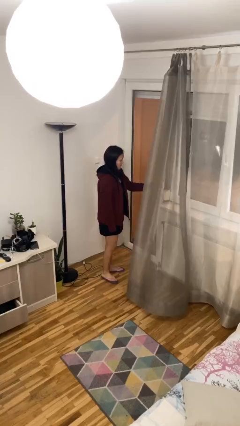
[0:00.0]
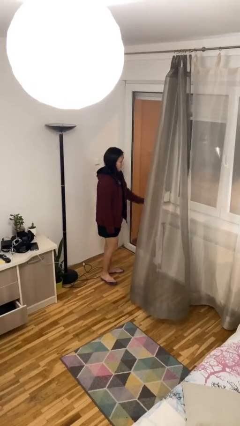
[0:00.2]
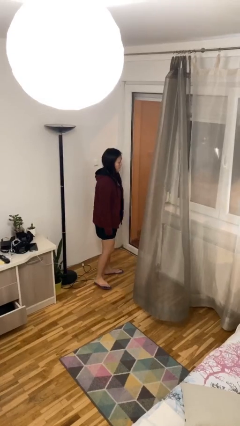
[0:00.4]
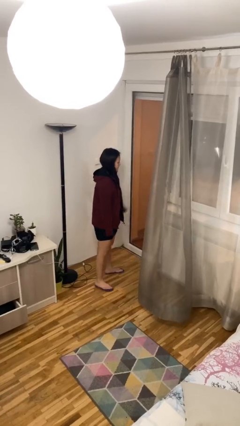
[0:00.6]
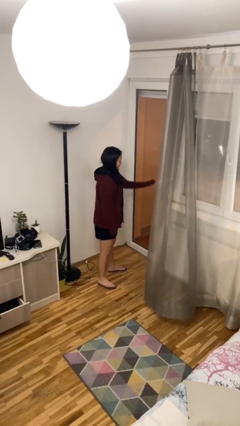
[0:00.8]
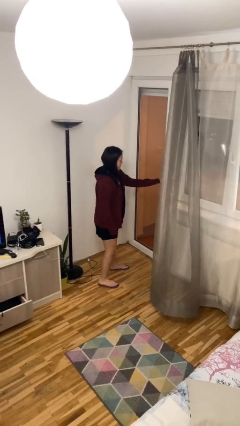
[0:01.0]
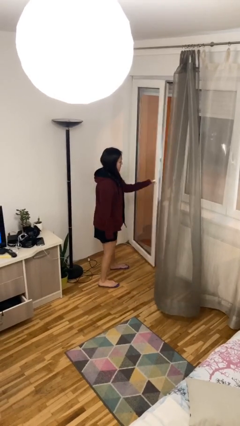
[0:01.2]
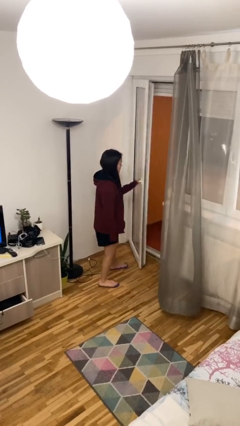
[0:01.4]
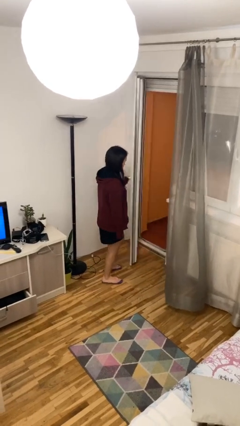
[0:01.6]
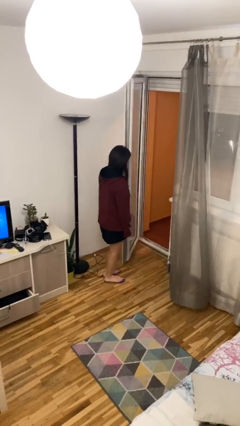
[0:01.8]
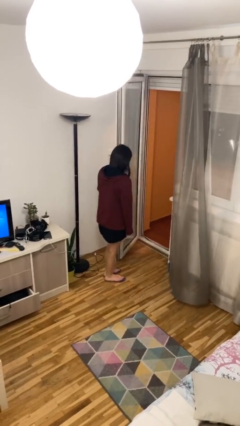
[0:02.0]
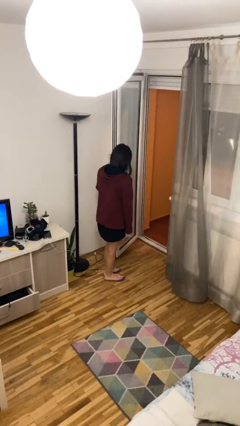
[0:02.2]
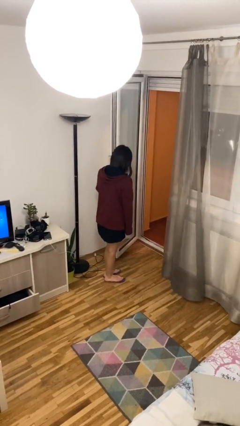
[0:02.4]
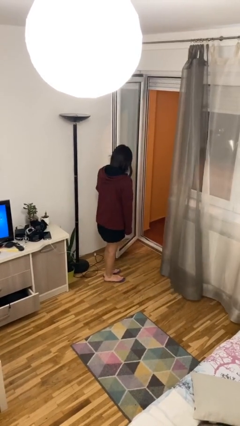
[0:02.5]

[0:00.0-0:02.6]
person opens facility door

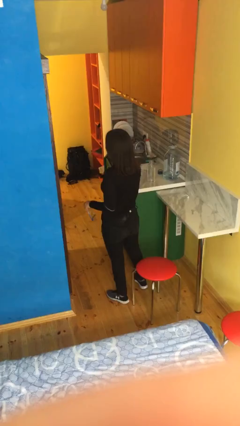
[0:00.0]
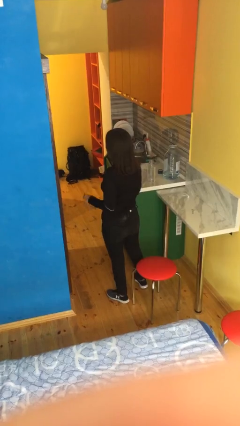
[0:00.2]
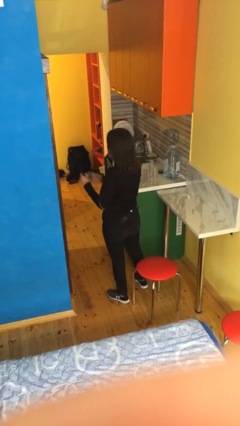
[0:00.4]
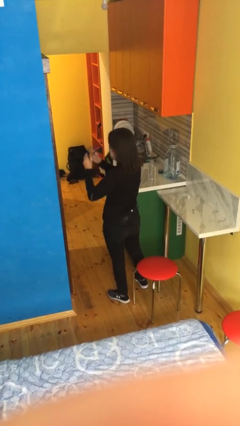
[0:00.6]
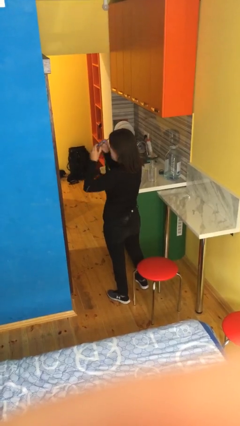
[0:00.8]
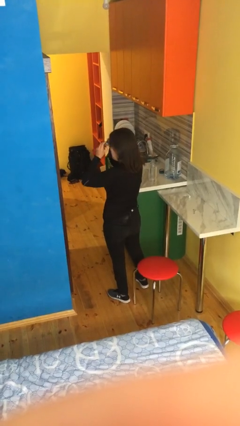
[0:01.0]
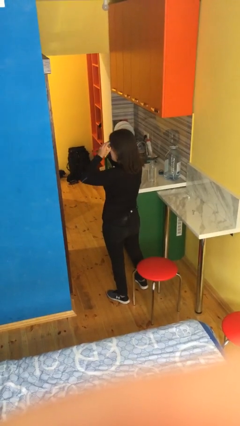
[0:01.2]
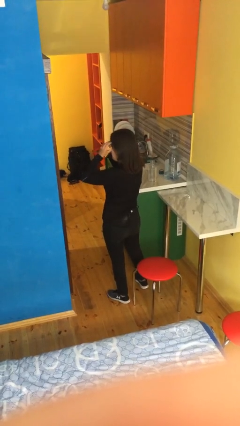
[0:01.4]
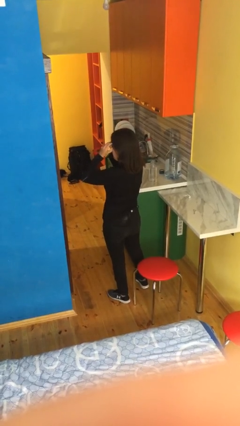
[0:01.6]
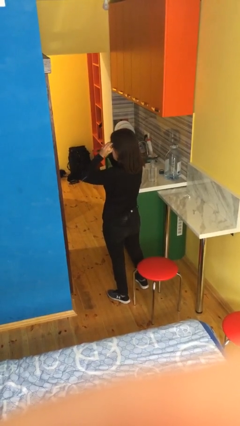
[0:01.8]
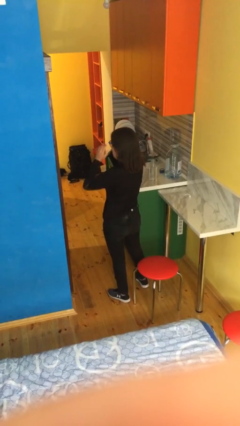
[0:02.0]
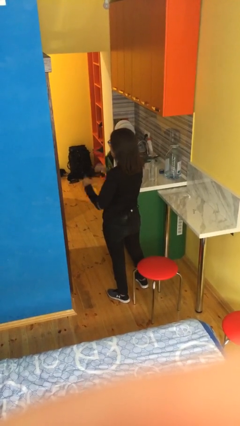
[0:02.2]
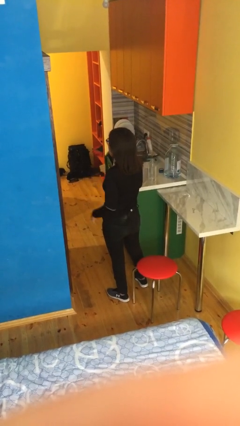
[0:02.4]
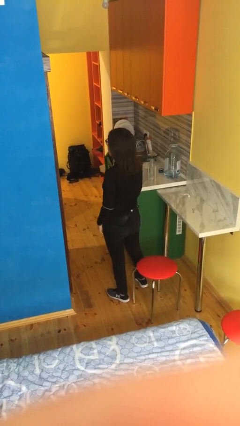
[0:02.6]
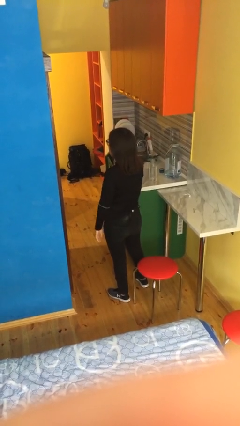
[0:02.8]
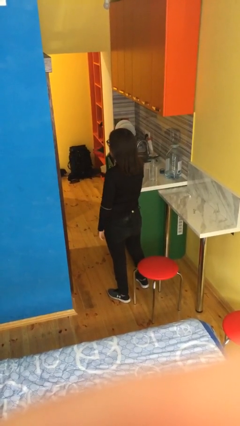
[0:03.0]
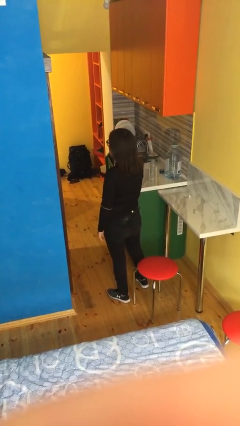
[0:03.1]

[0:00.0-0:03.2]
person puts on glasses

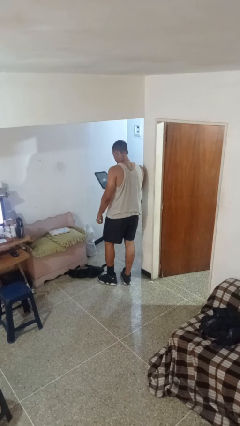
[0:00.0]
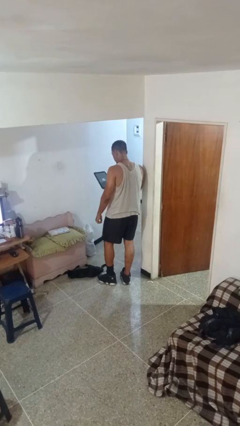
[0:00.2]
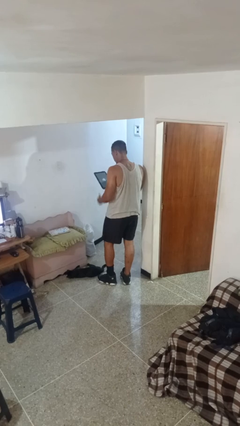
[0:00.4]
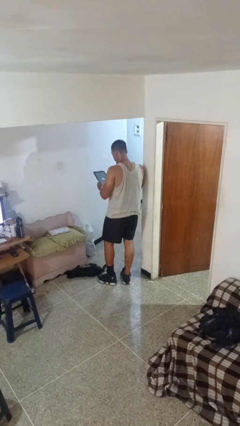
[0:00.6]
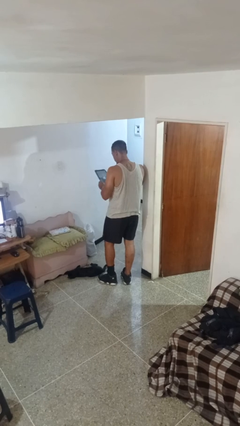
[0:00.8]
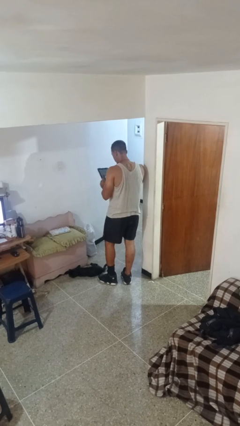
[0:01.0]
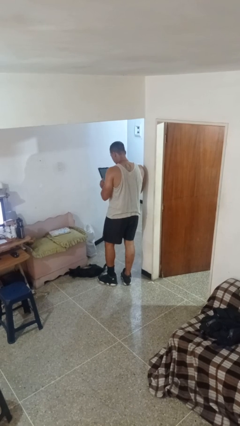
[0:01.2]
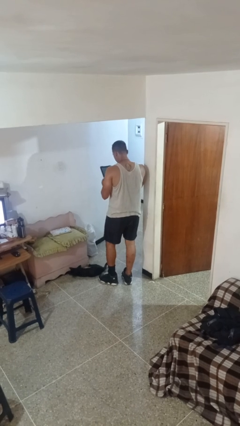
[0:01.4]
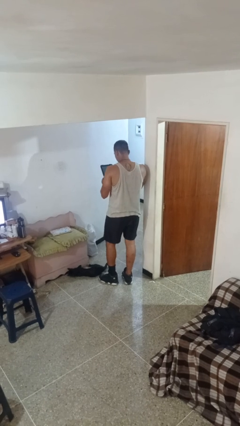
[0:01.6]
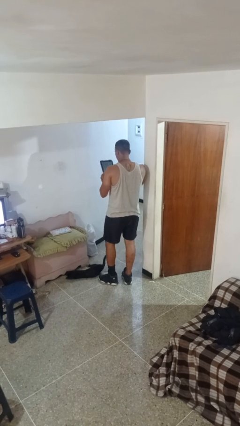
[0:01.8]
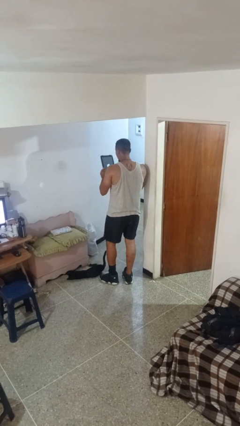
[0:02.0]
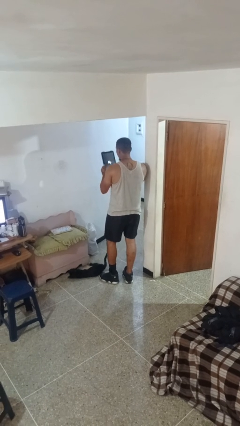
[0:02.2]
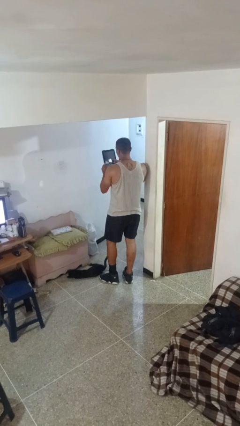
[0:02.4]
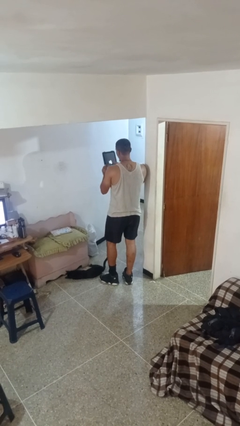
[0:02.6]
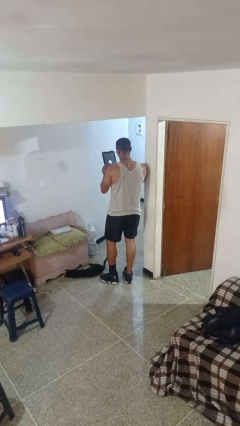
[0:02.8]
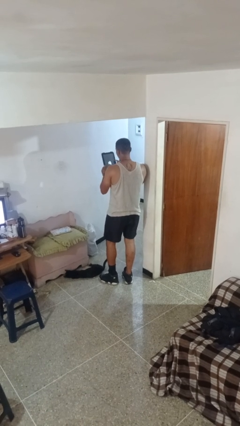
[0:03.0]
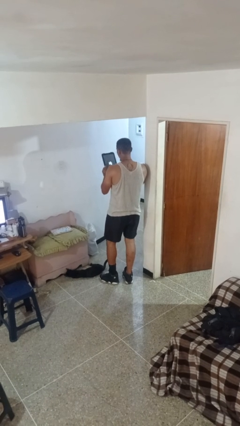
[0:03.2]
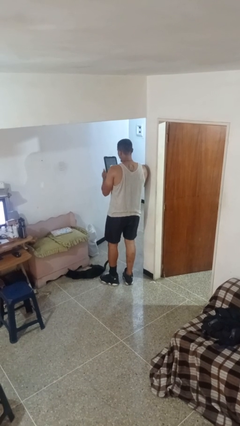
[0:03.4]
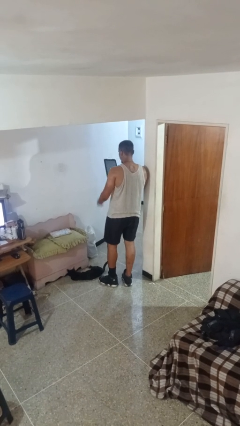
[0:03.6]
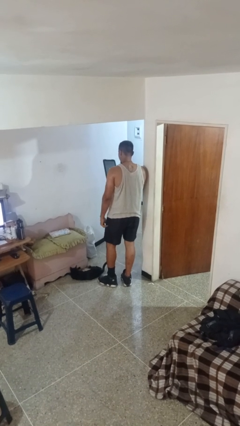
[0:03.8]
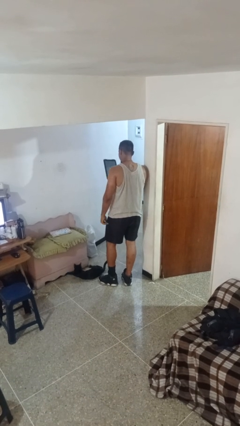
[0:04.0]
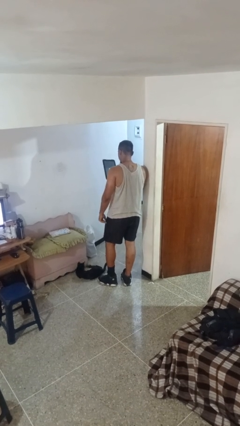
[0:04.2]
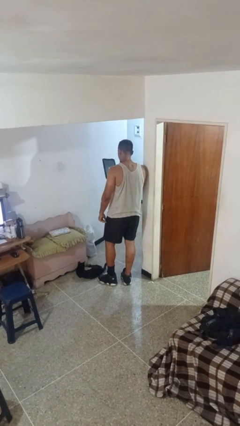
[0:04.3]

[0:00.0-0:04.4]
person interacts with tablet

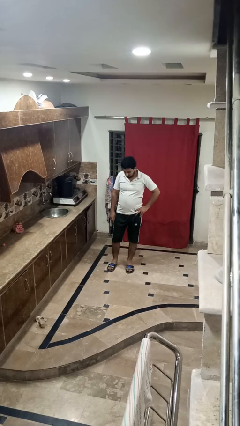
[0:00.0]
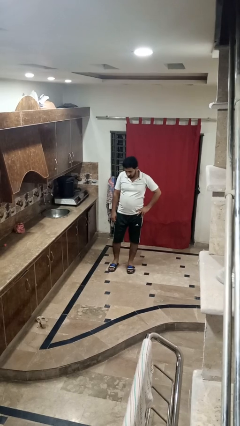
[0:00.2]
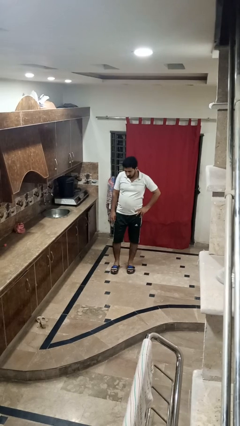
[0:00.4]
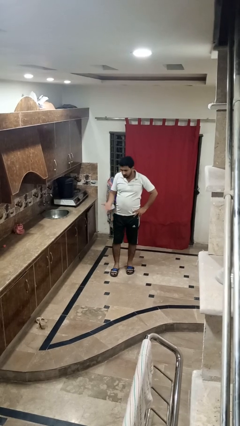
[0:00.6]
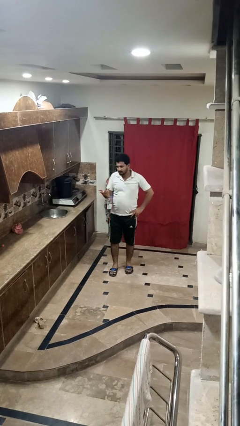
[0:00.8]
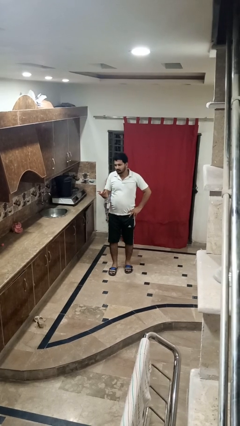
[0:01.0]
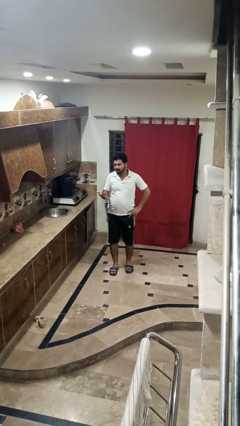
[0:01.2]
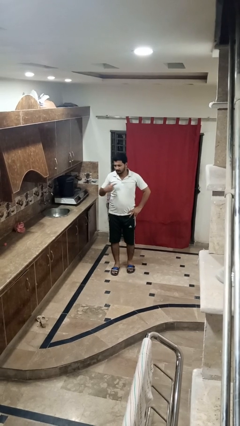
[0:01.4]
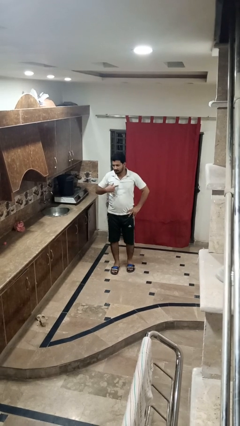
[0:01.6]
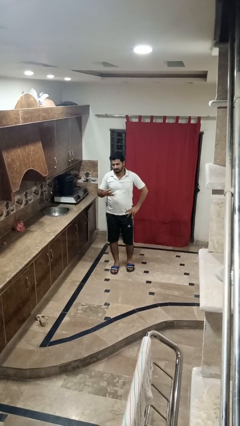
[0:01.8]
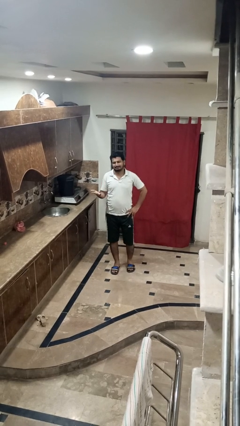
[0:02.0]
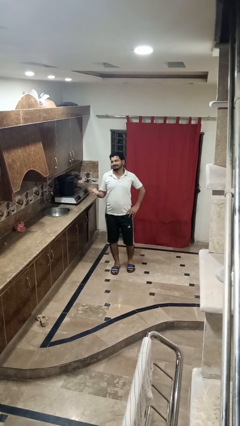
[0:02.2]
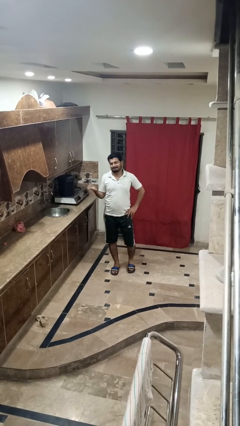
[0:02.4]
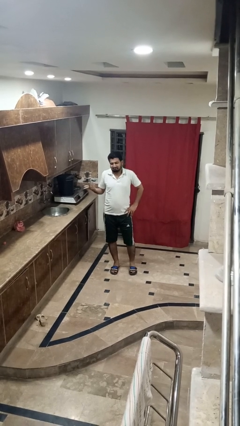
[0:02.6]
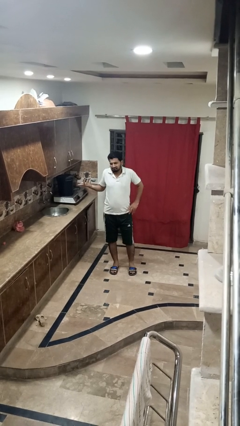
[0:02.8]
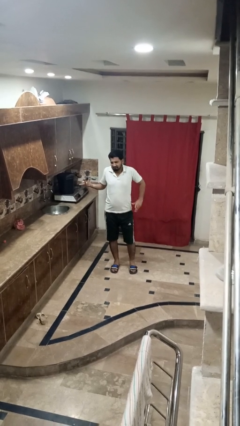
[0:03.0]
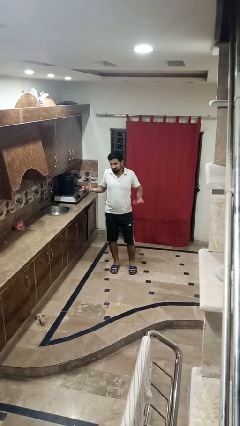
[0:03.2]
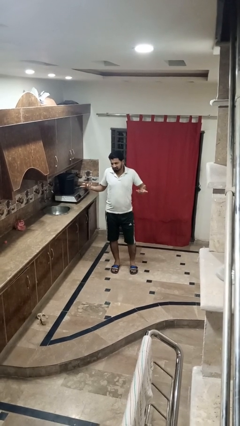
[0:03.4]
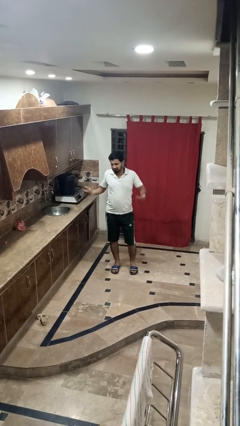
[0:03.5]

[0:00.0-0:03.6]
person shrugs

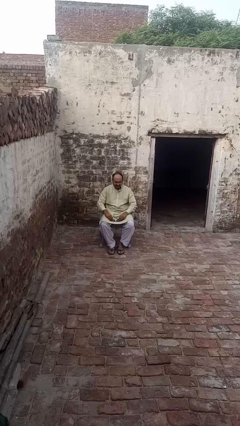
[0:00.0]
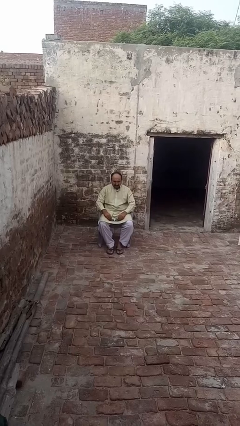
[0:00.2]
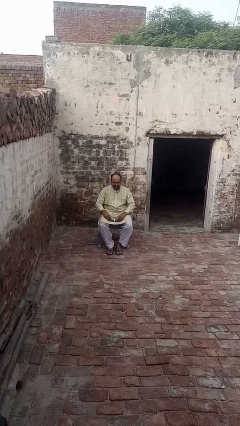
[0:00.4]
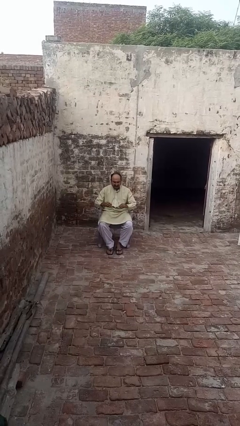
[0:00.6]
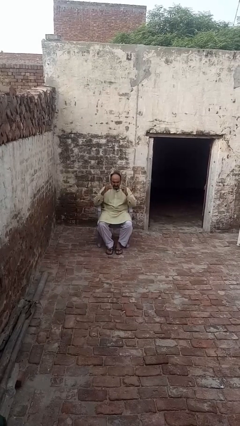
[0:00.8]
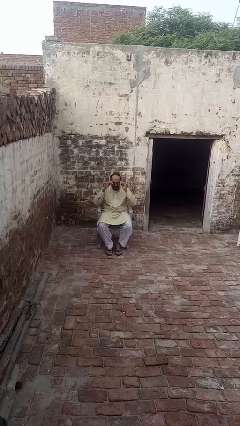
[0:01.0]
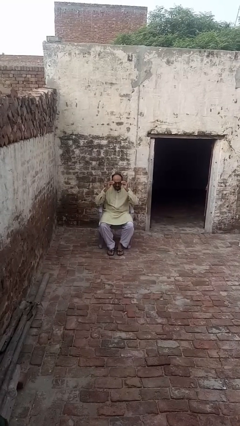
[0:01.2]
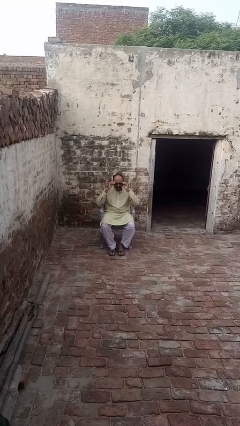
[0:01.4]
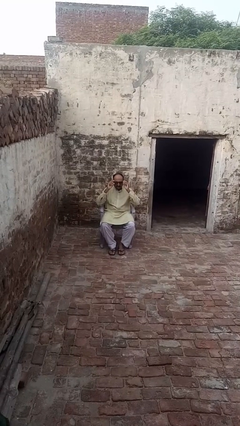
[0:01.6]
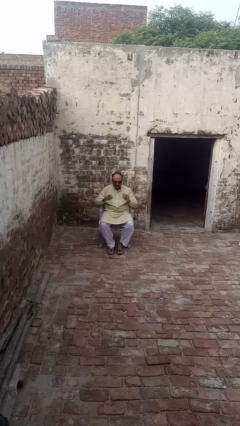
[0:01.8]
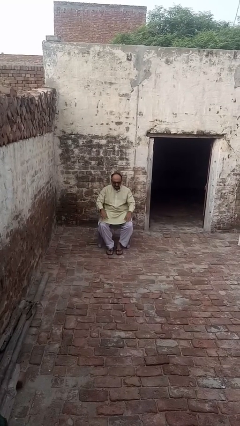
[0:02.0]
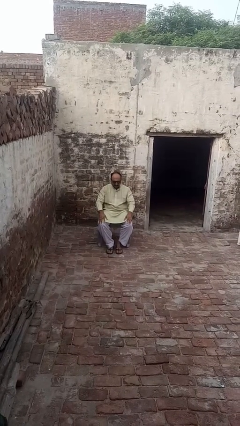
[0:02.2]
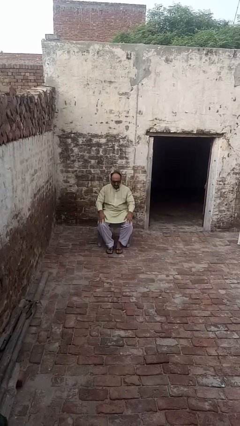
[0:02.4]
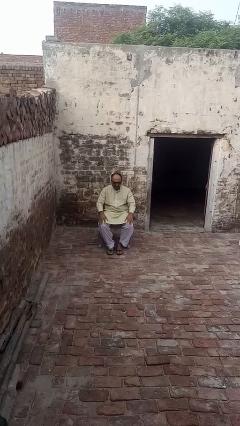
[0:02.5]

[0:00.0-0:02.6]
person puts on sunglasses

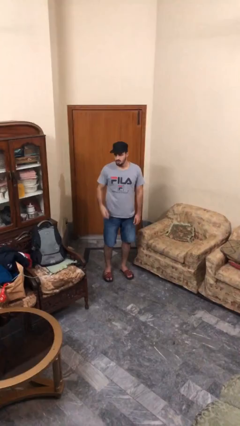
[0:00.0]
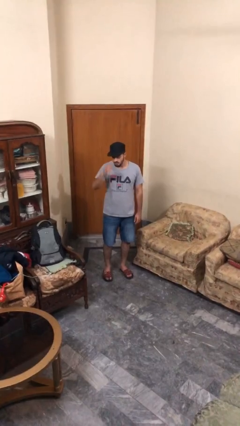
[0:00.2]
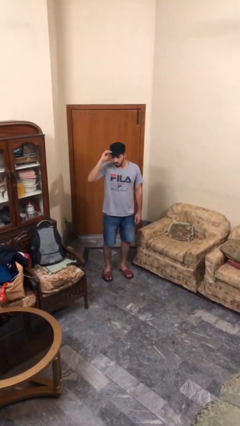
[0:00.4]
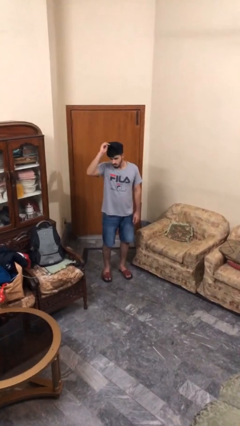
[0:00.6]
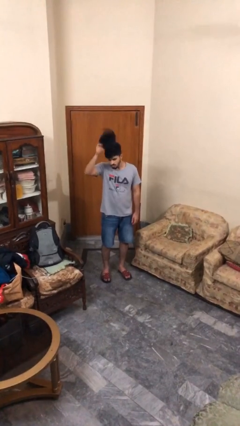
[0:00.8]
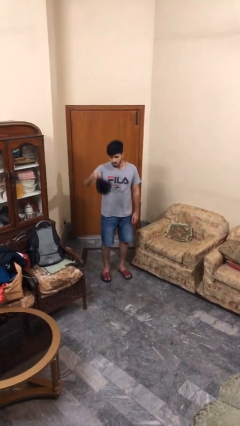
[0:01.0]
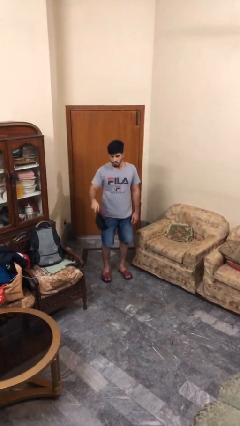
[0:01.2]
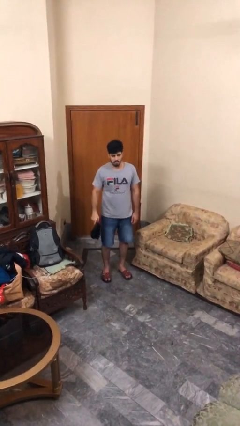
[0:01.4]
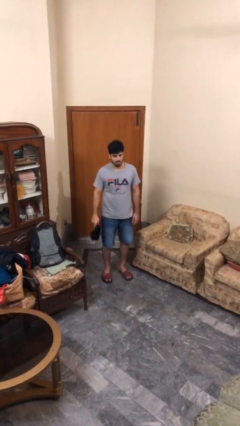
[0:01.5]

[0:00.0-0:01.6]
person takes off hat
